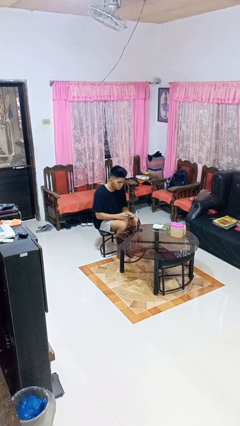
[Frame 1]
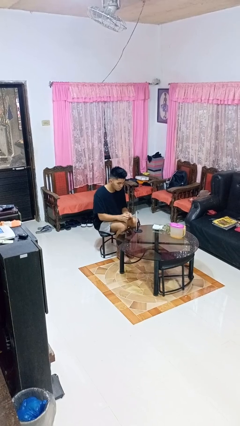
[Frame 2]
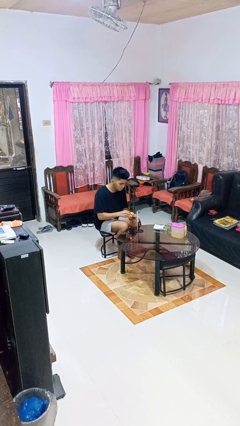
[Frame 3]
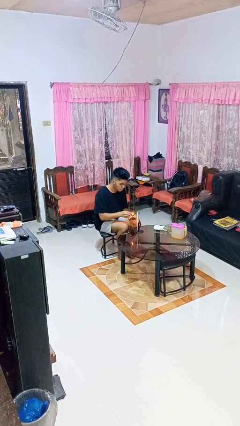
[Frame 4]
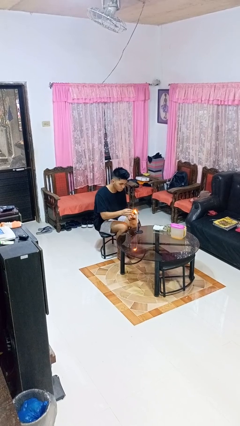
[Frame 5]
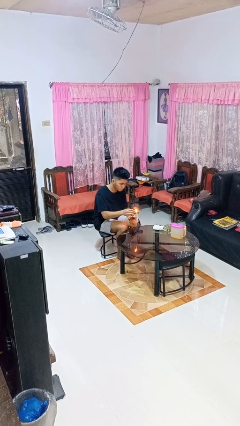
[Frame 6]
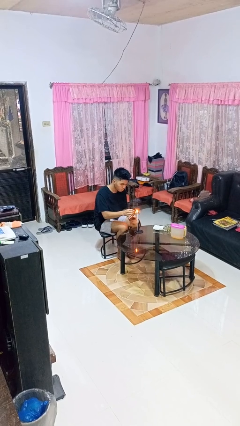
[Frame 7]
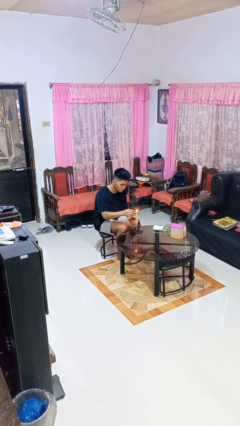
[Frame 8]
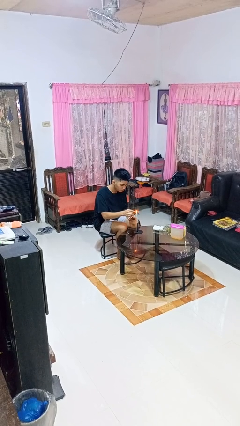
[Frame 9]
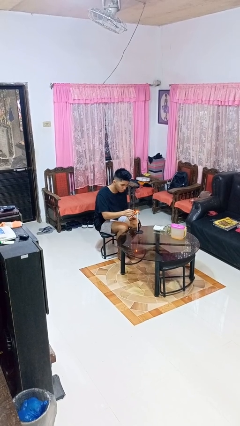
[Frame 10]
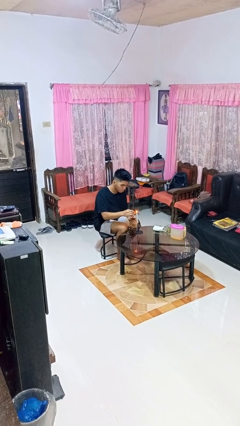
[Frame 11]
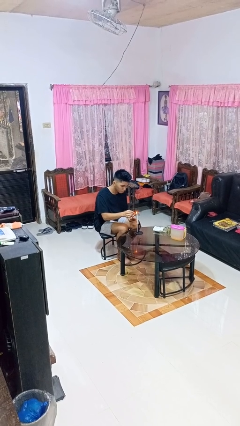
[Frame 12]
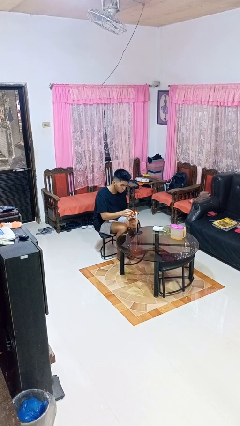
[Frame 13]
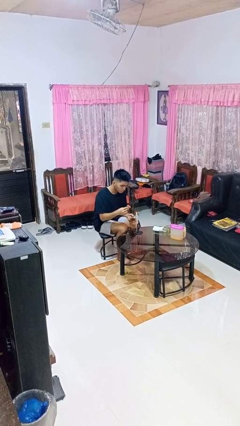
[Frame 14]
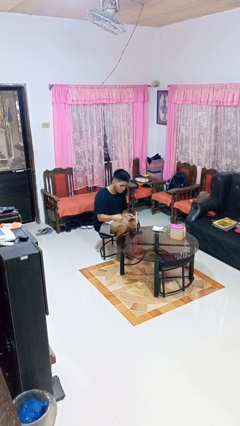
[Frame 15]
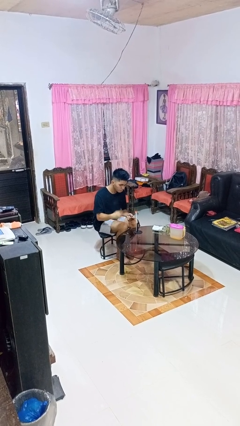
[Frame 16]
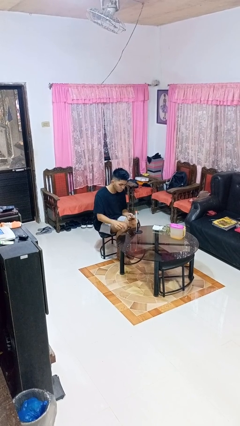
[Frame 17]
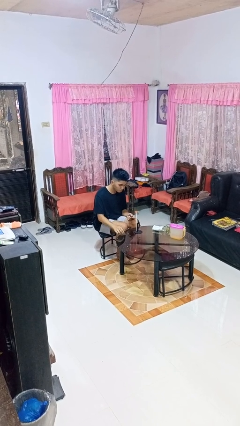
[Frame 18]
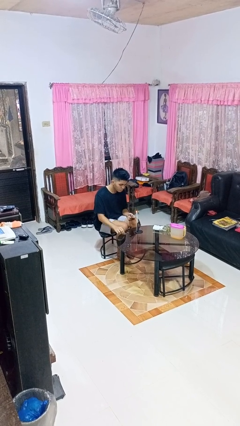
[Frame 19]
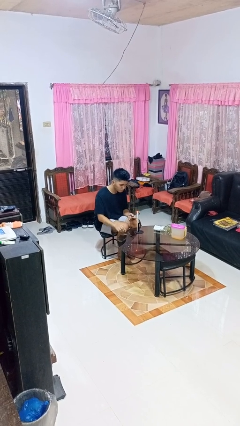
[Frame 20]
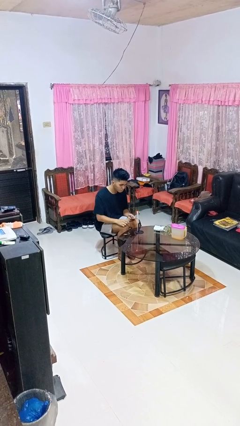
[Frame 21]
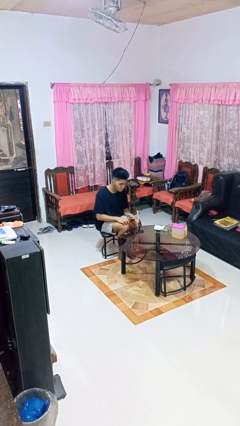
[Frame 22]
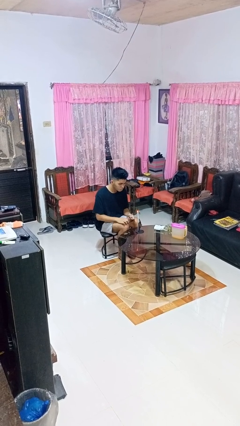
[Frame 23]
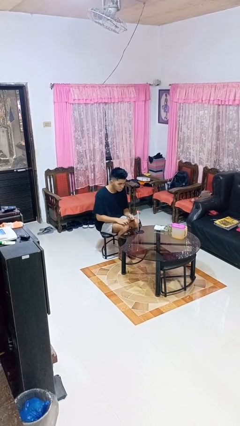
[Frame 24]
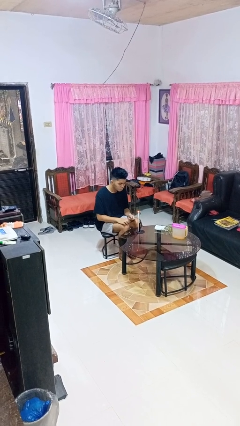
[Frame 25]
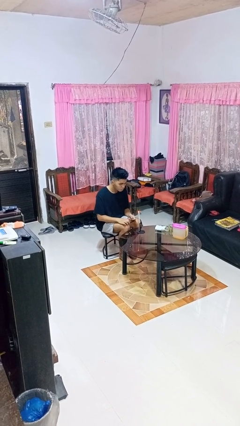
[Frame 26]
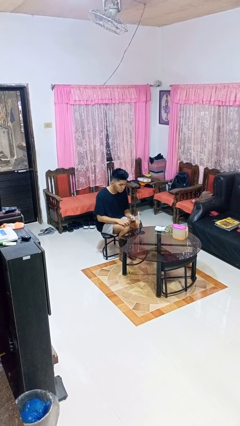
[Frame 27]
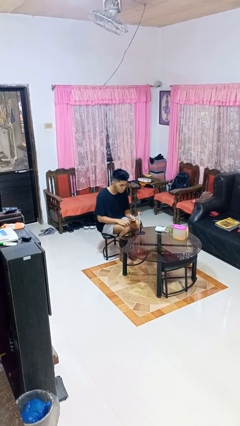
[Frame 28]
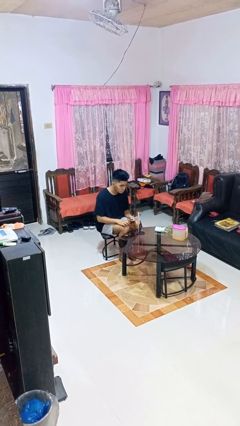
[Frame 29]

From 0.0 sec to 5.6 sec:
person lights candle

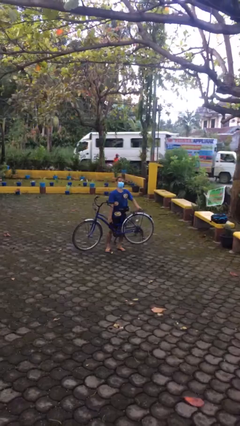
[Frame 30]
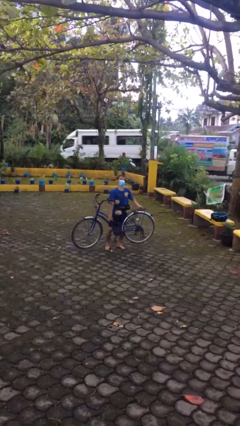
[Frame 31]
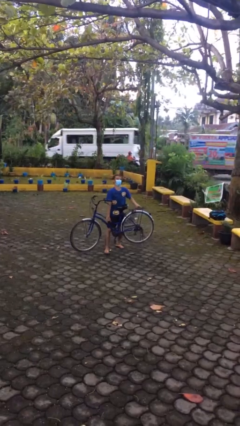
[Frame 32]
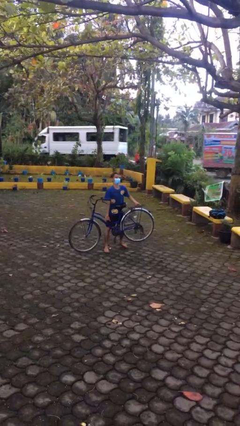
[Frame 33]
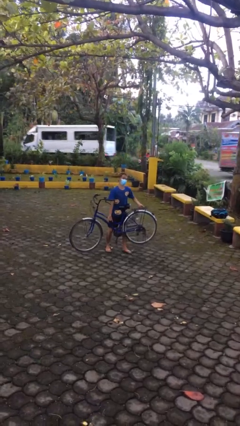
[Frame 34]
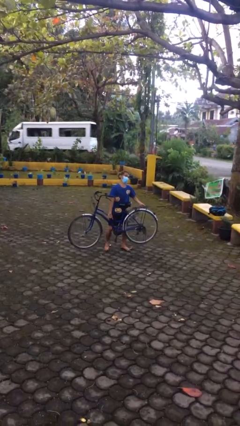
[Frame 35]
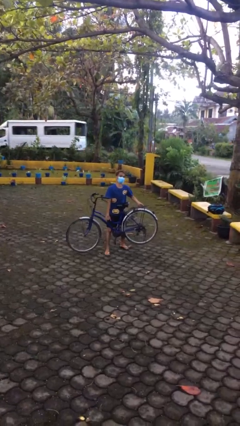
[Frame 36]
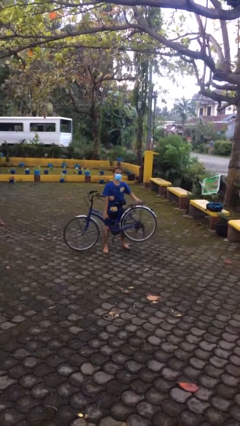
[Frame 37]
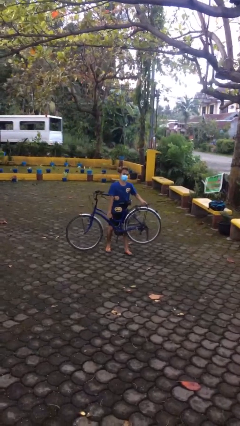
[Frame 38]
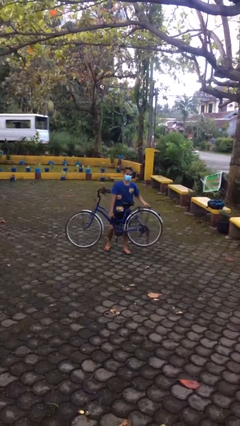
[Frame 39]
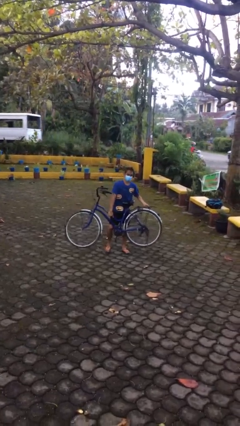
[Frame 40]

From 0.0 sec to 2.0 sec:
person carries heavy object

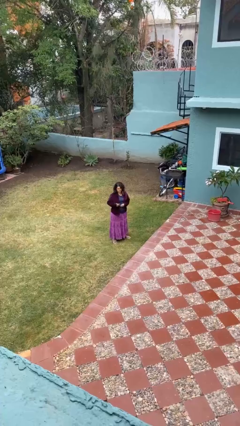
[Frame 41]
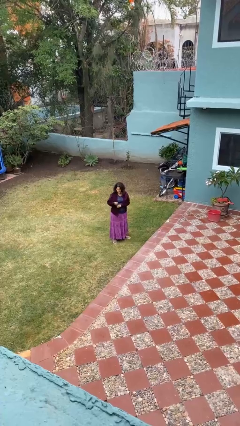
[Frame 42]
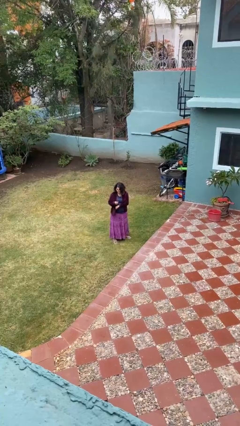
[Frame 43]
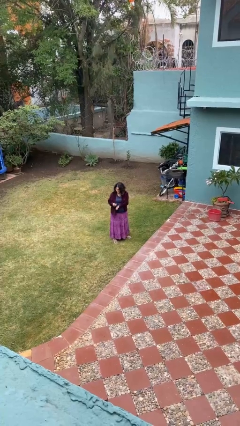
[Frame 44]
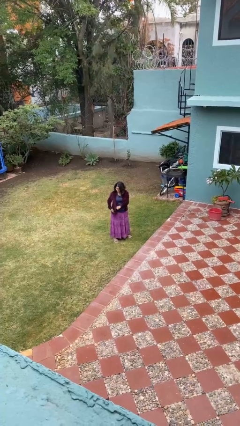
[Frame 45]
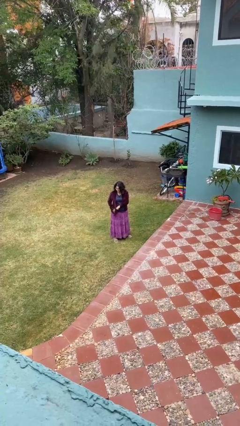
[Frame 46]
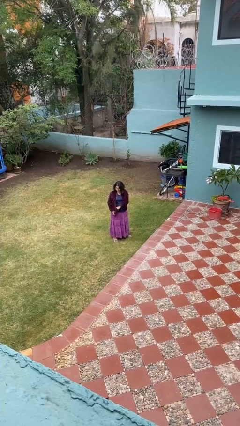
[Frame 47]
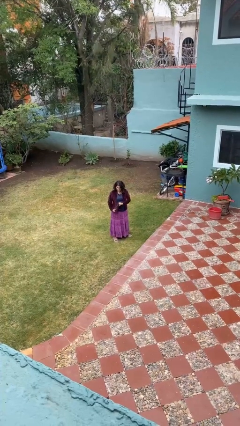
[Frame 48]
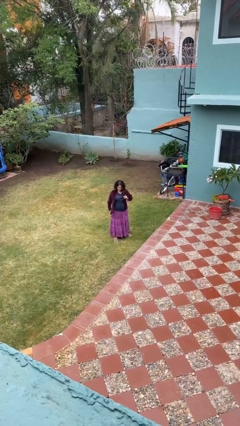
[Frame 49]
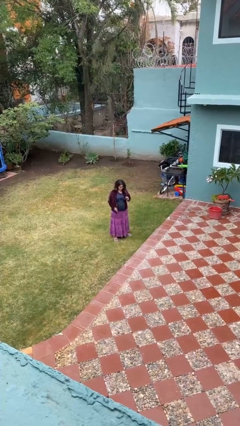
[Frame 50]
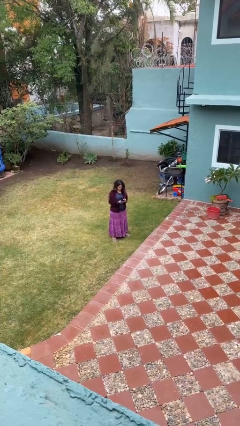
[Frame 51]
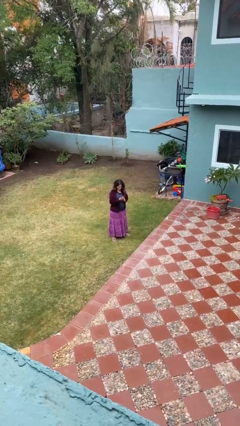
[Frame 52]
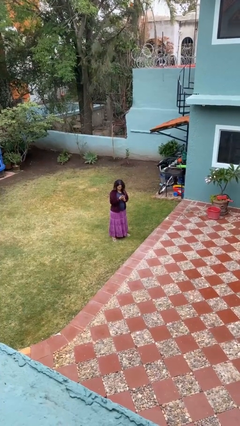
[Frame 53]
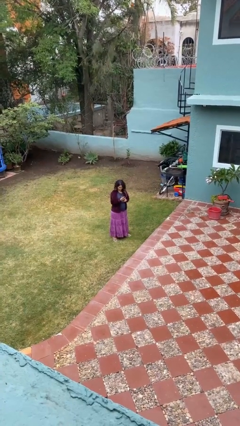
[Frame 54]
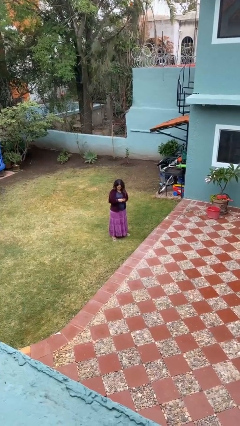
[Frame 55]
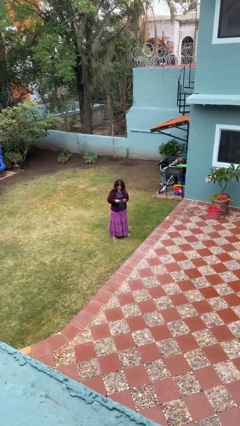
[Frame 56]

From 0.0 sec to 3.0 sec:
person takes phone from pocket

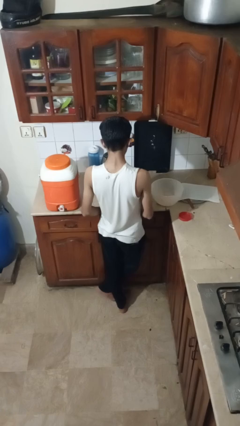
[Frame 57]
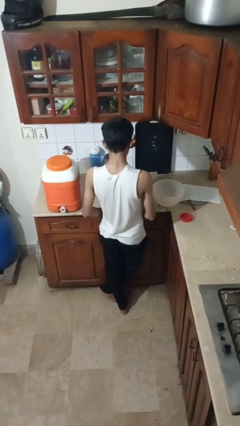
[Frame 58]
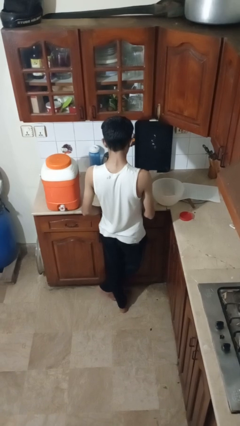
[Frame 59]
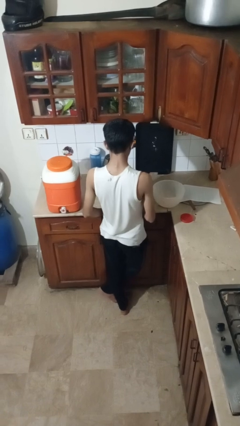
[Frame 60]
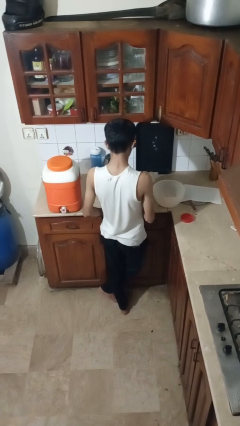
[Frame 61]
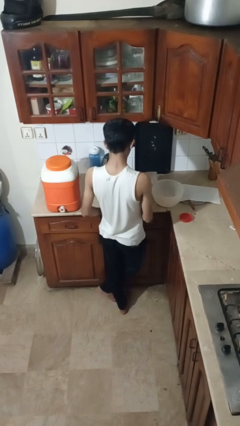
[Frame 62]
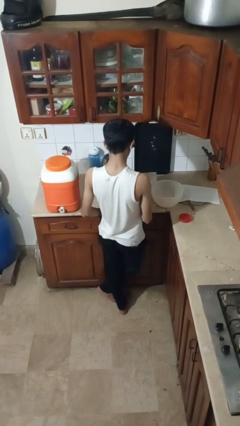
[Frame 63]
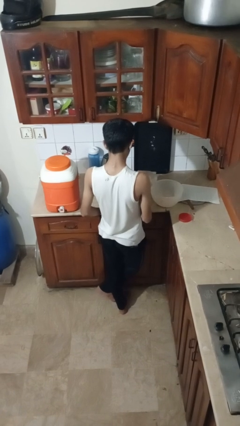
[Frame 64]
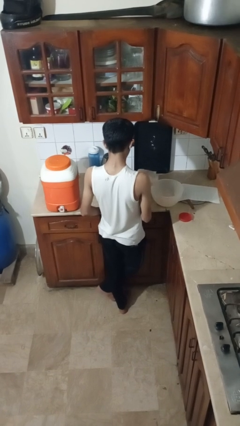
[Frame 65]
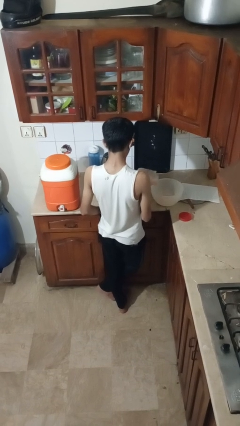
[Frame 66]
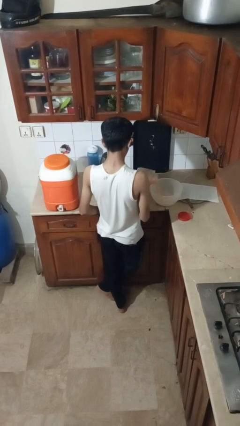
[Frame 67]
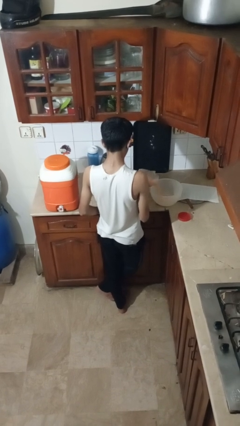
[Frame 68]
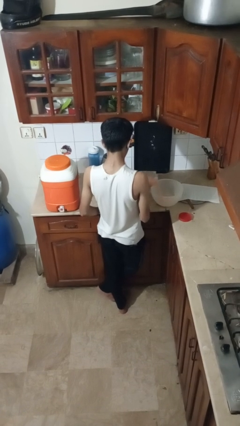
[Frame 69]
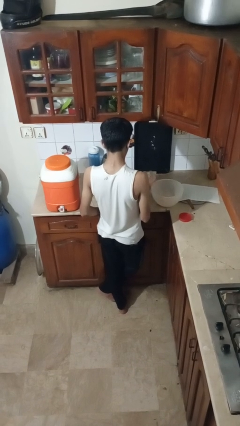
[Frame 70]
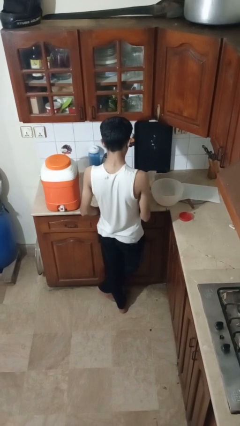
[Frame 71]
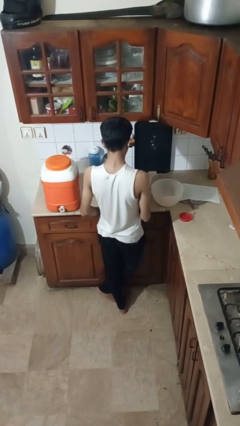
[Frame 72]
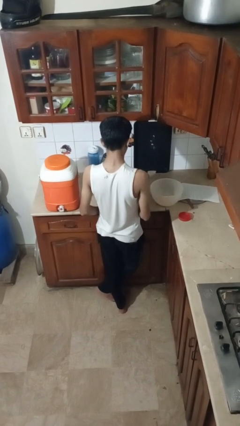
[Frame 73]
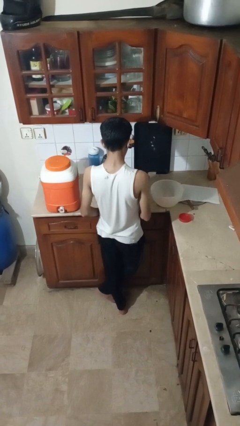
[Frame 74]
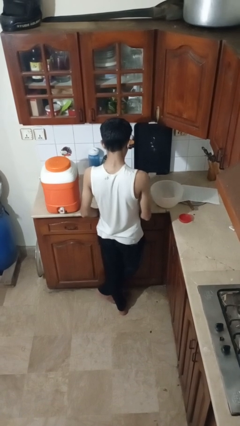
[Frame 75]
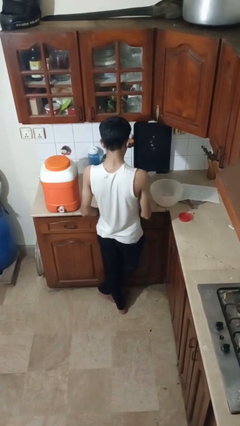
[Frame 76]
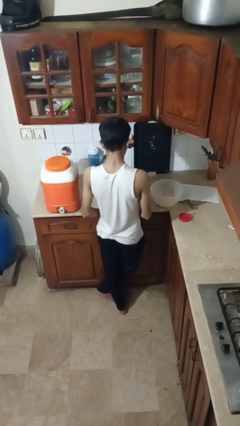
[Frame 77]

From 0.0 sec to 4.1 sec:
person pours into bowl

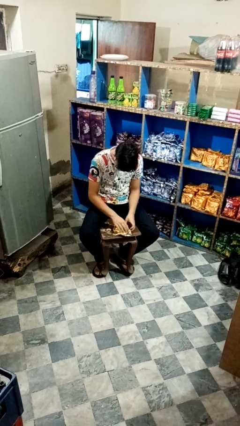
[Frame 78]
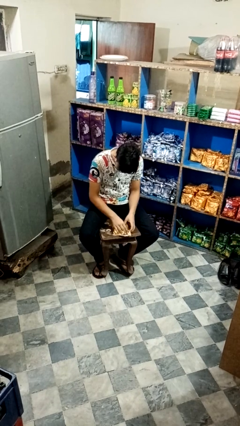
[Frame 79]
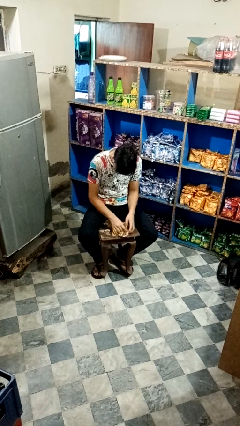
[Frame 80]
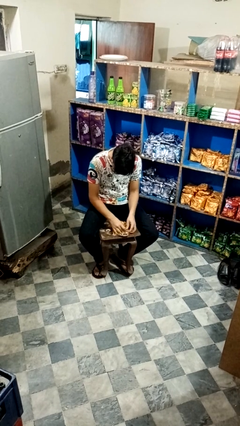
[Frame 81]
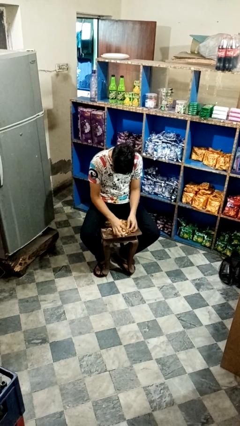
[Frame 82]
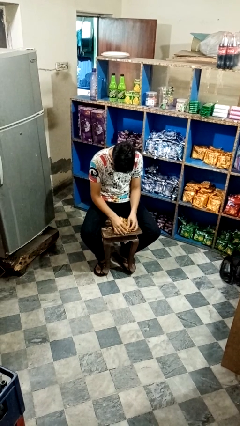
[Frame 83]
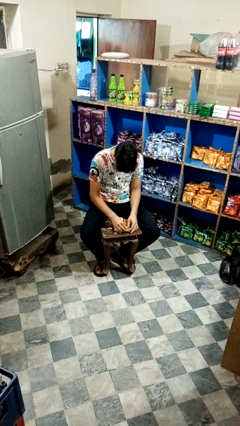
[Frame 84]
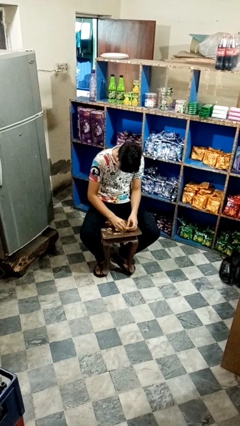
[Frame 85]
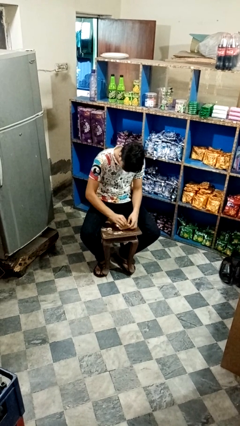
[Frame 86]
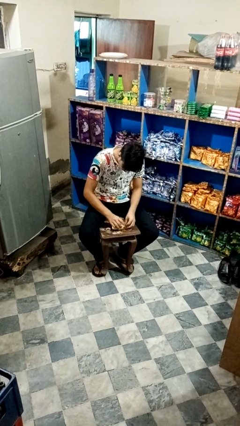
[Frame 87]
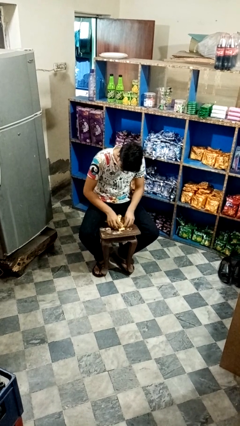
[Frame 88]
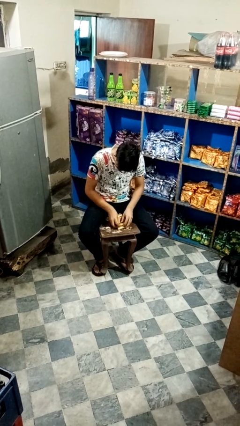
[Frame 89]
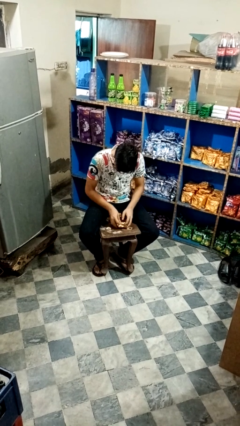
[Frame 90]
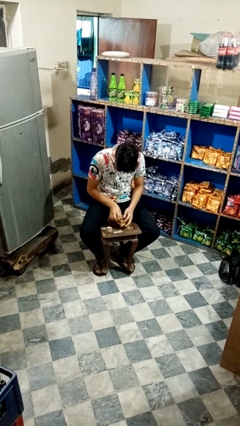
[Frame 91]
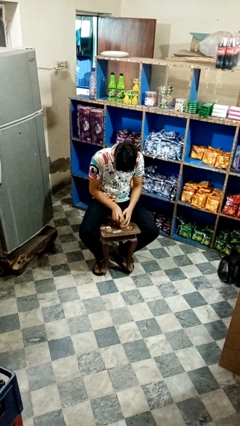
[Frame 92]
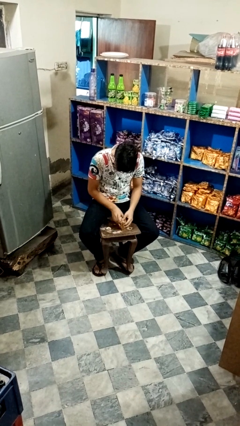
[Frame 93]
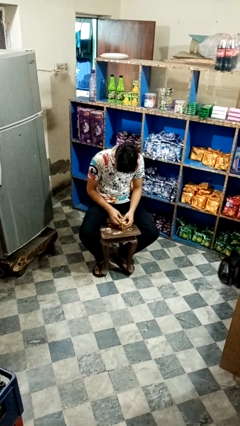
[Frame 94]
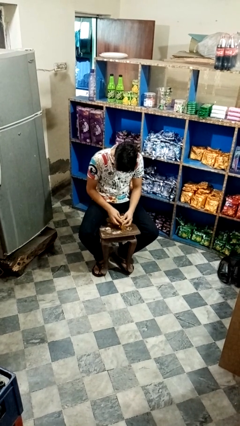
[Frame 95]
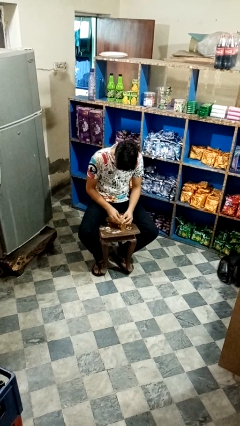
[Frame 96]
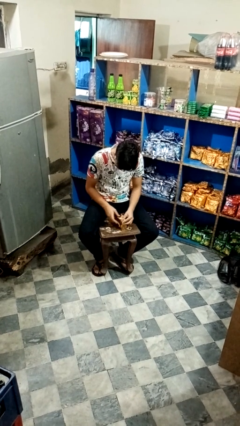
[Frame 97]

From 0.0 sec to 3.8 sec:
person wraps box
